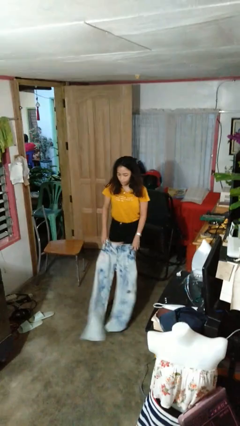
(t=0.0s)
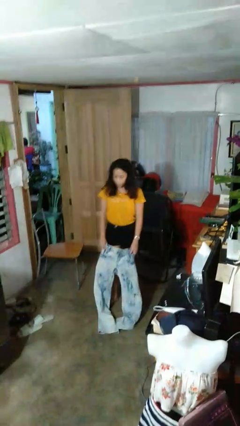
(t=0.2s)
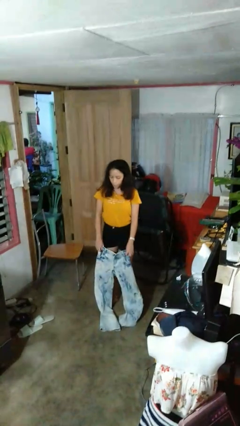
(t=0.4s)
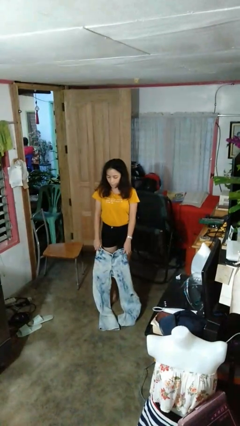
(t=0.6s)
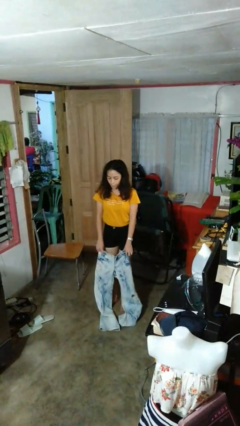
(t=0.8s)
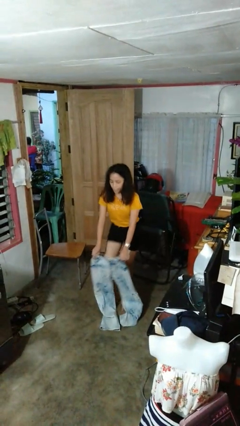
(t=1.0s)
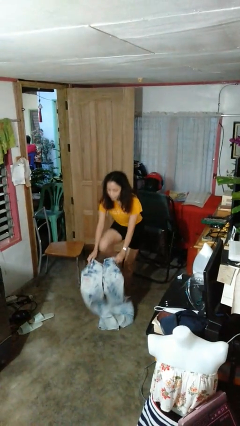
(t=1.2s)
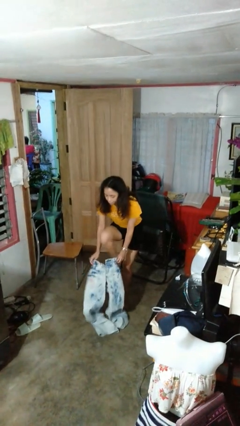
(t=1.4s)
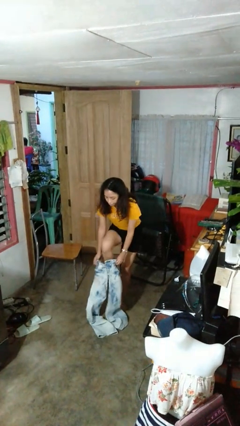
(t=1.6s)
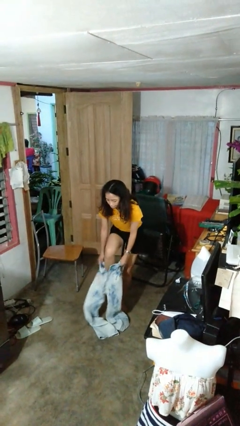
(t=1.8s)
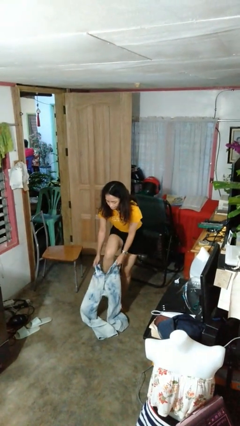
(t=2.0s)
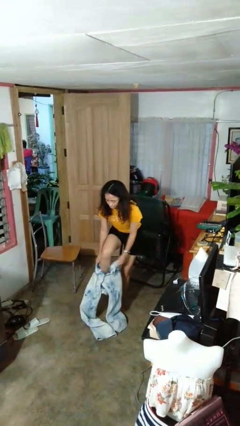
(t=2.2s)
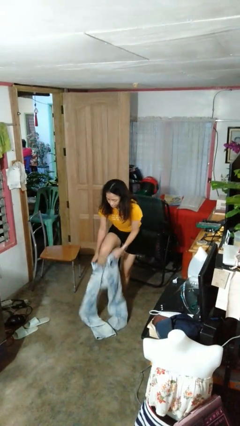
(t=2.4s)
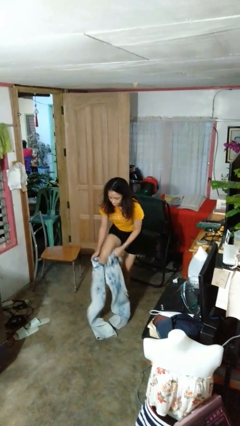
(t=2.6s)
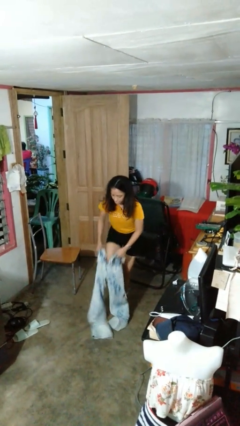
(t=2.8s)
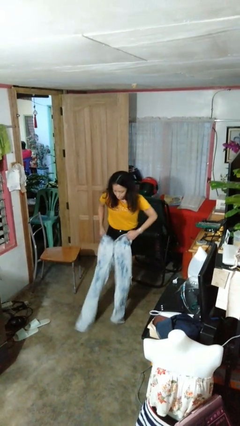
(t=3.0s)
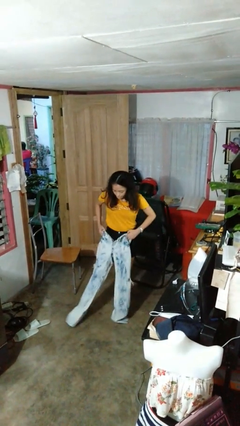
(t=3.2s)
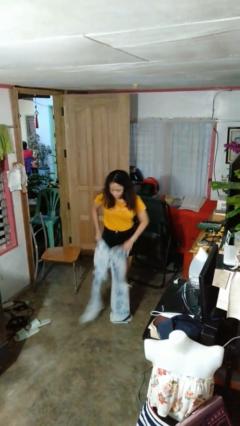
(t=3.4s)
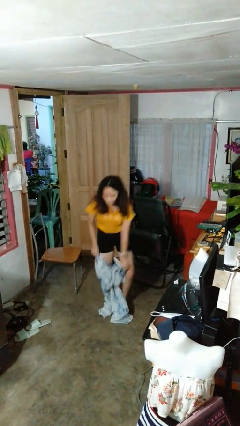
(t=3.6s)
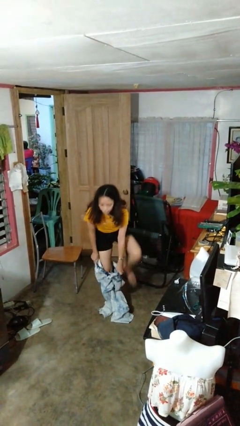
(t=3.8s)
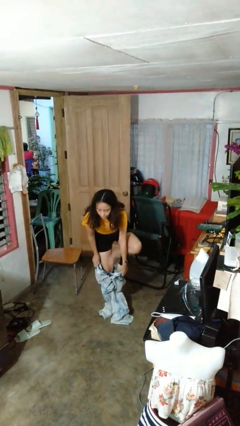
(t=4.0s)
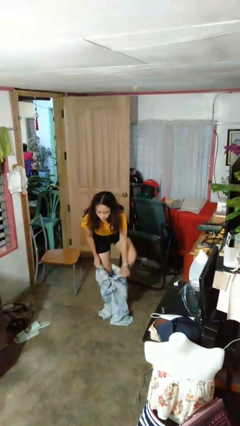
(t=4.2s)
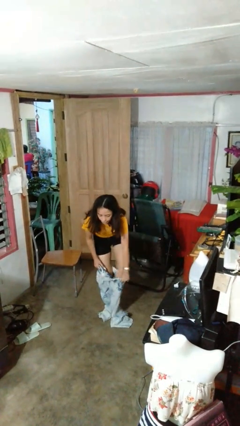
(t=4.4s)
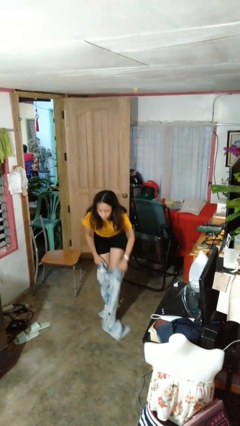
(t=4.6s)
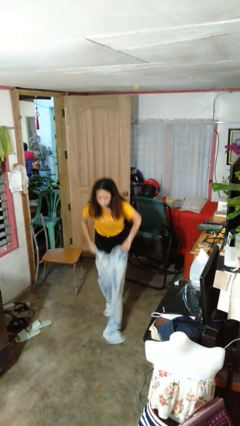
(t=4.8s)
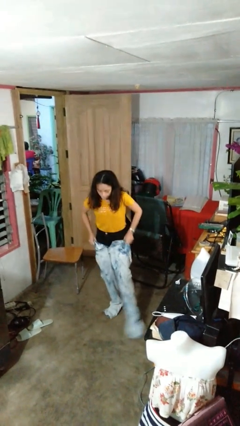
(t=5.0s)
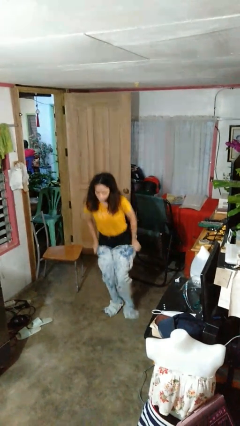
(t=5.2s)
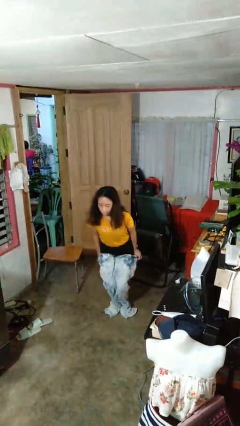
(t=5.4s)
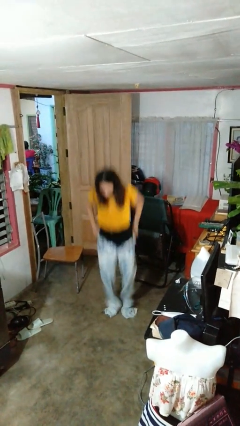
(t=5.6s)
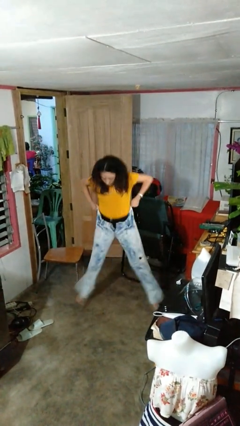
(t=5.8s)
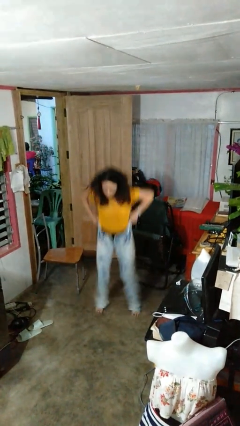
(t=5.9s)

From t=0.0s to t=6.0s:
person puts on pants

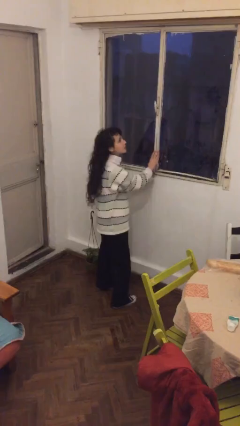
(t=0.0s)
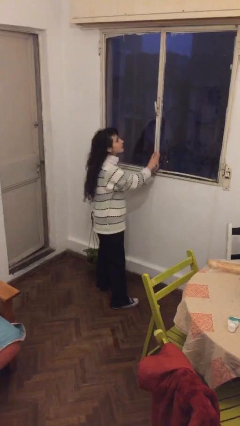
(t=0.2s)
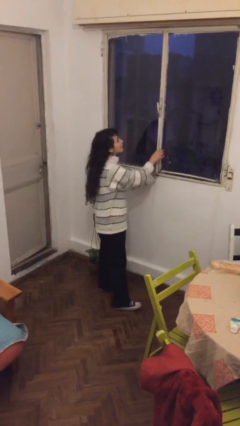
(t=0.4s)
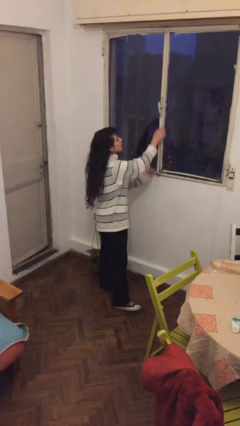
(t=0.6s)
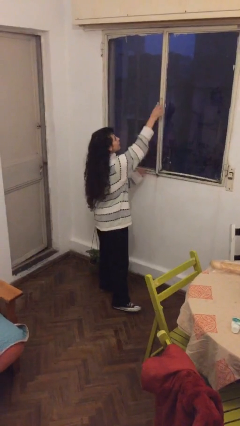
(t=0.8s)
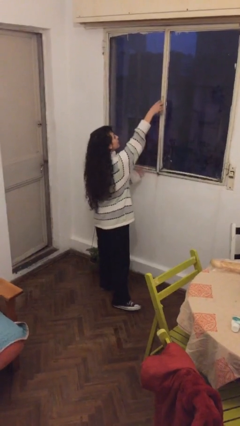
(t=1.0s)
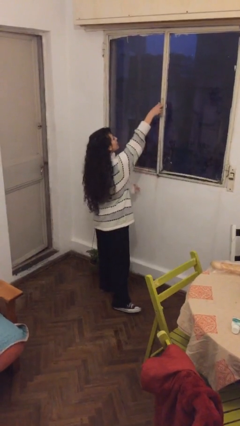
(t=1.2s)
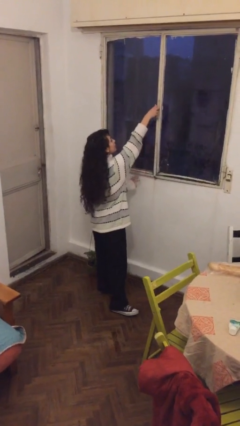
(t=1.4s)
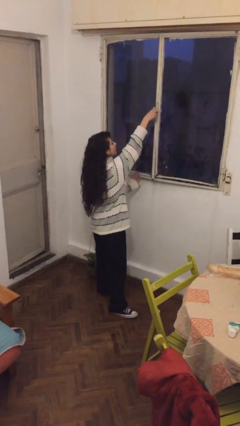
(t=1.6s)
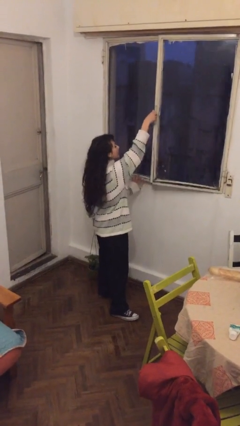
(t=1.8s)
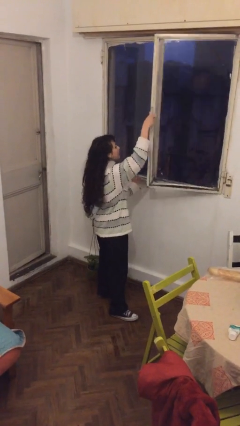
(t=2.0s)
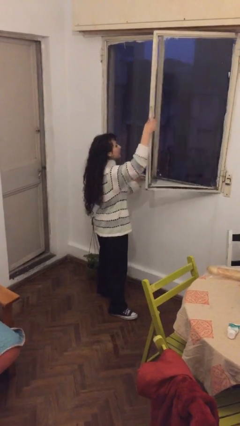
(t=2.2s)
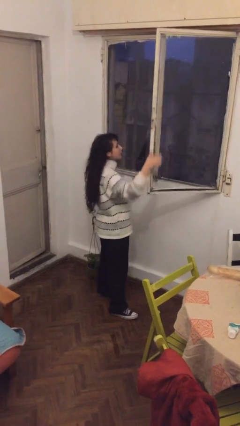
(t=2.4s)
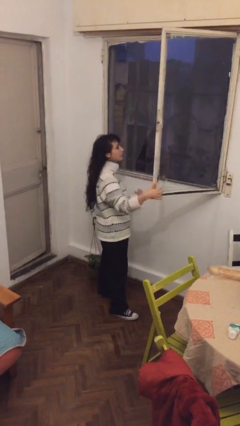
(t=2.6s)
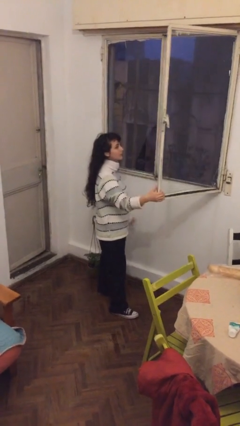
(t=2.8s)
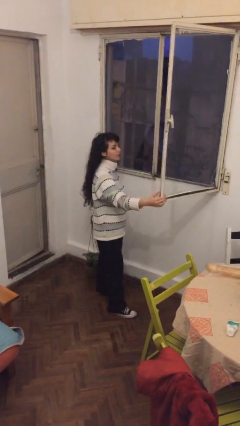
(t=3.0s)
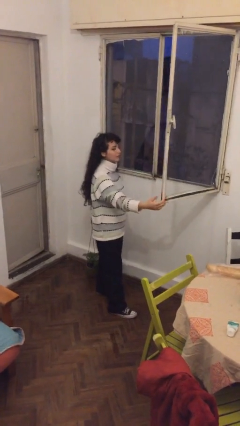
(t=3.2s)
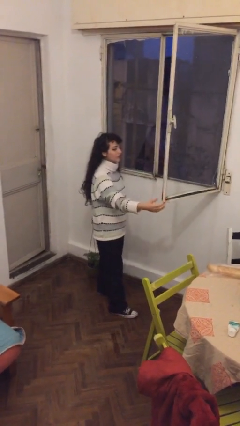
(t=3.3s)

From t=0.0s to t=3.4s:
person opens home window

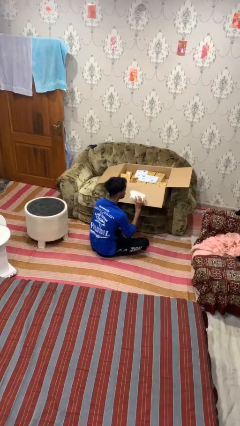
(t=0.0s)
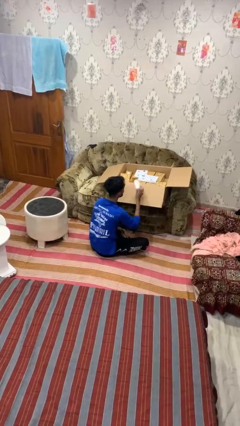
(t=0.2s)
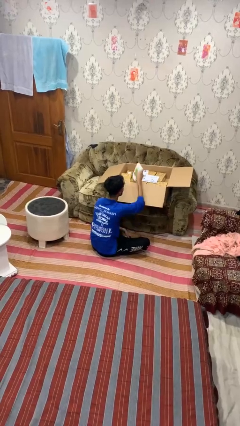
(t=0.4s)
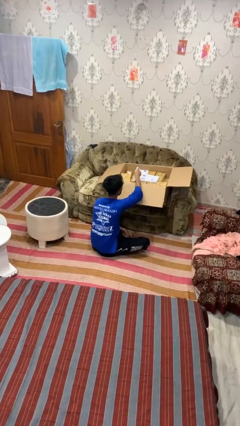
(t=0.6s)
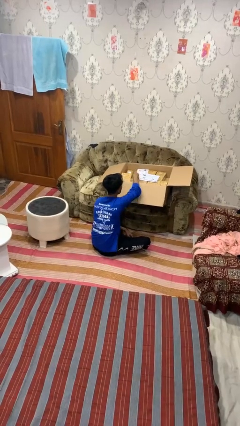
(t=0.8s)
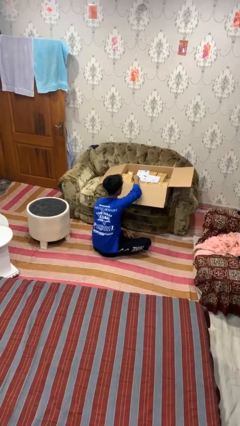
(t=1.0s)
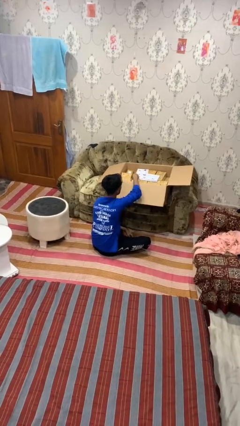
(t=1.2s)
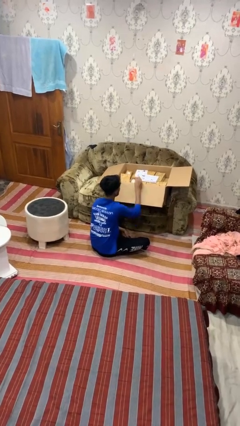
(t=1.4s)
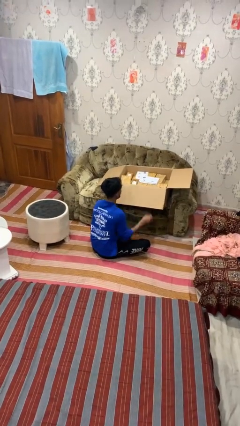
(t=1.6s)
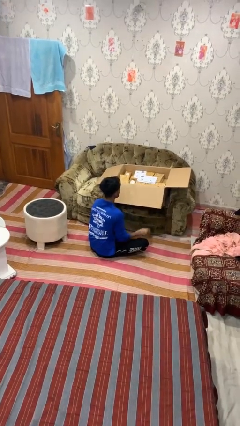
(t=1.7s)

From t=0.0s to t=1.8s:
person puts object into box

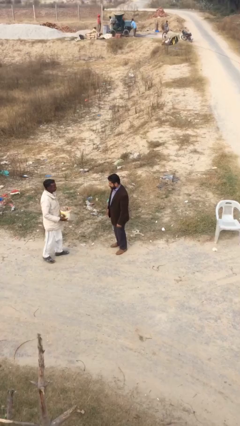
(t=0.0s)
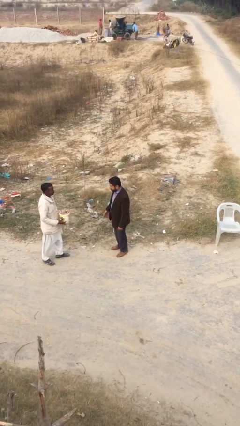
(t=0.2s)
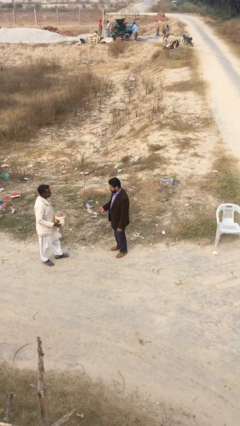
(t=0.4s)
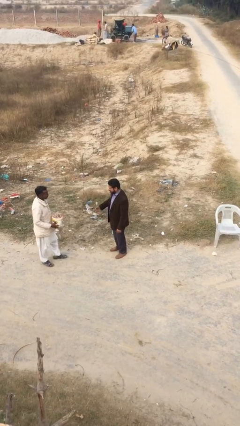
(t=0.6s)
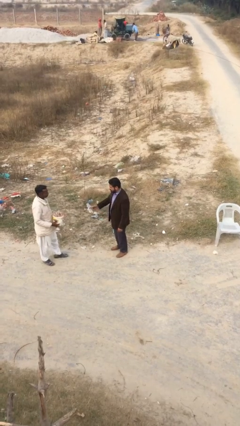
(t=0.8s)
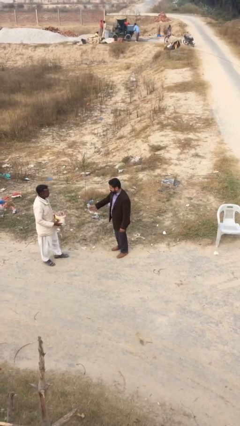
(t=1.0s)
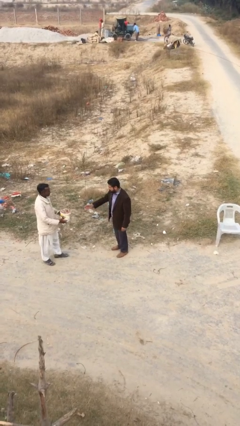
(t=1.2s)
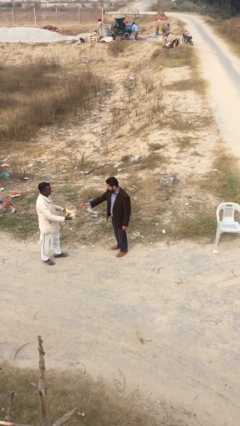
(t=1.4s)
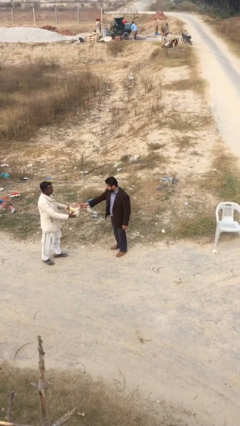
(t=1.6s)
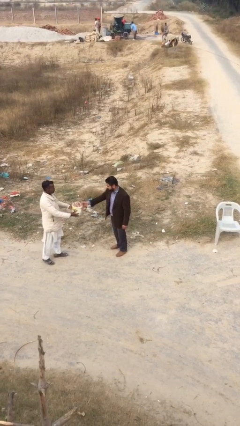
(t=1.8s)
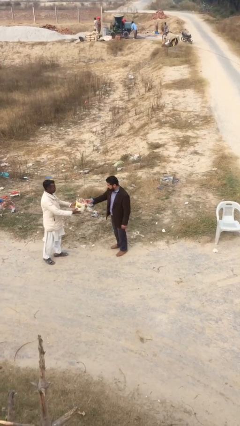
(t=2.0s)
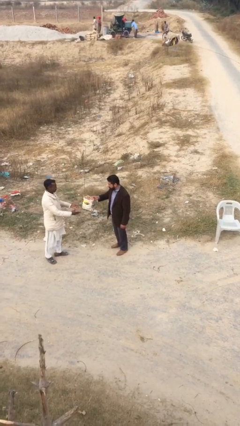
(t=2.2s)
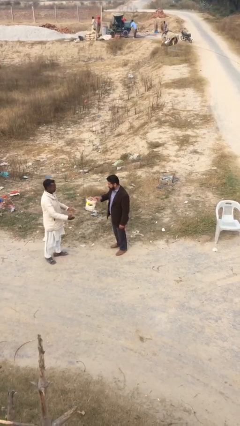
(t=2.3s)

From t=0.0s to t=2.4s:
person transfers object to person

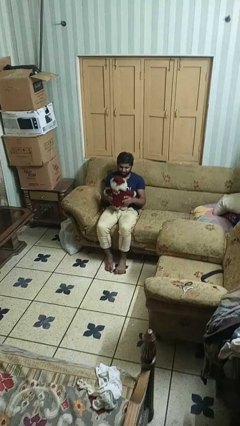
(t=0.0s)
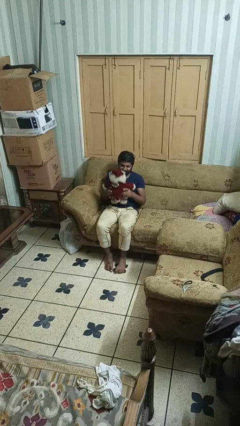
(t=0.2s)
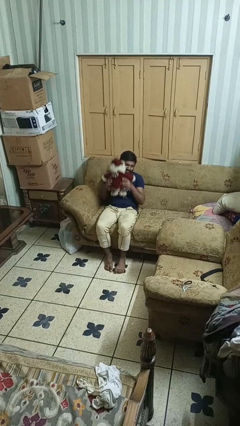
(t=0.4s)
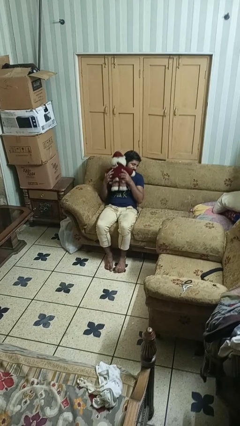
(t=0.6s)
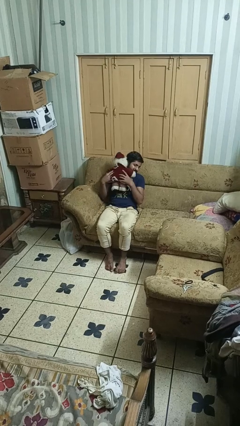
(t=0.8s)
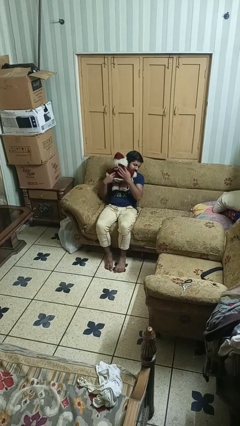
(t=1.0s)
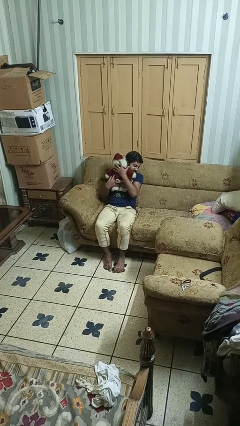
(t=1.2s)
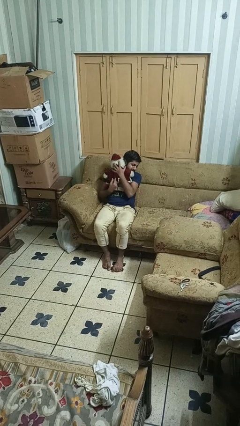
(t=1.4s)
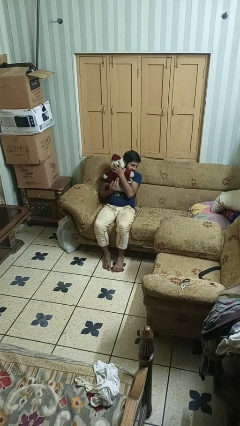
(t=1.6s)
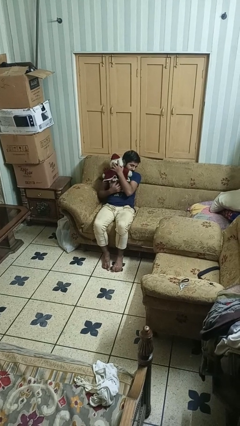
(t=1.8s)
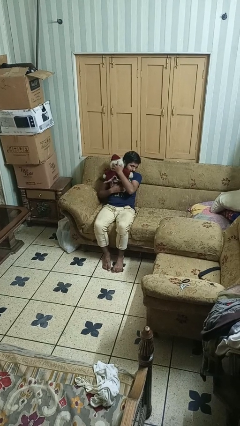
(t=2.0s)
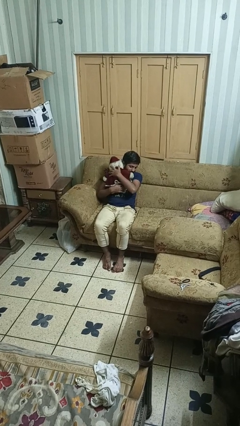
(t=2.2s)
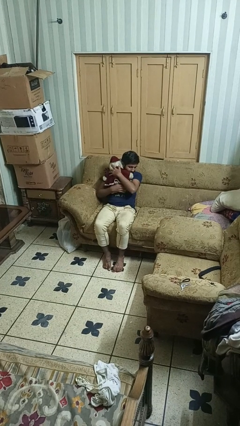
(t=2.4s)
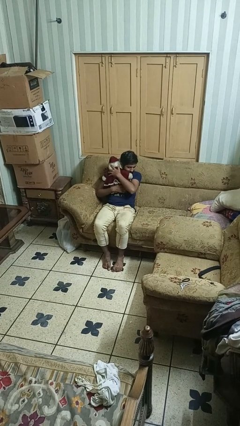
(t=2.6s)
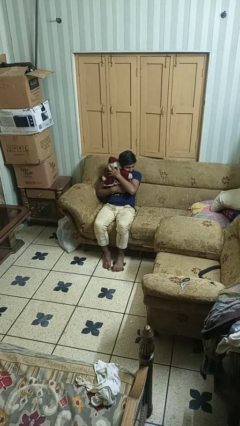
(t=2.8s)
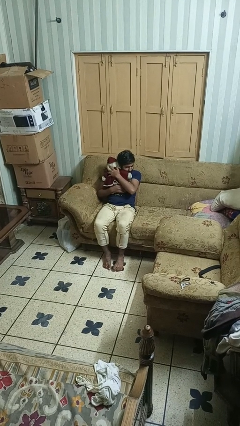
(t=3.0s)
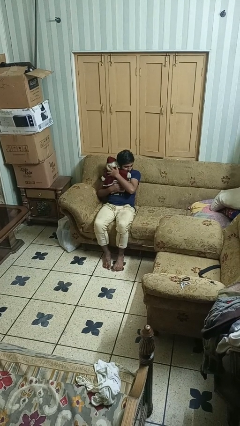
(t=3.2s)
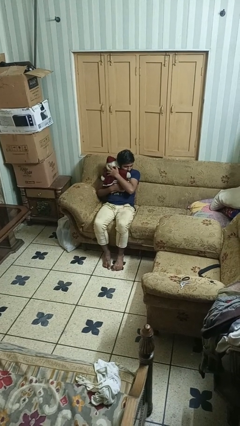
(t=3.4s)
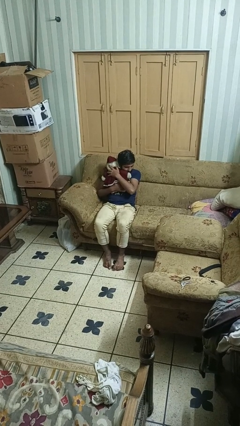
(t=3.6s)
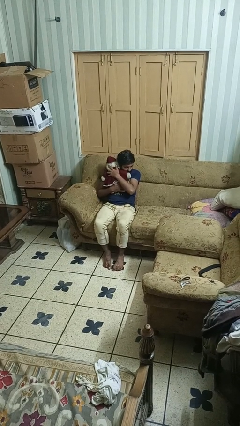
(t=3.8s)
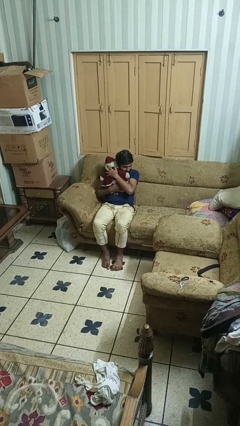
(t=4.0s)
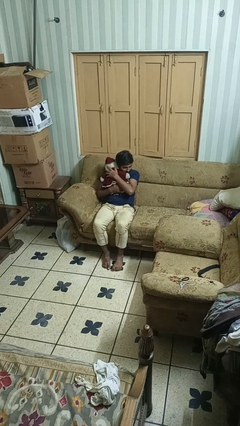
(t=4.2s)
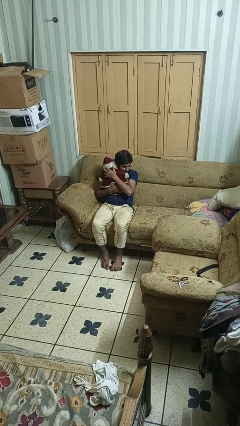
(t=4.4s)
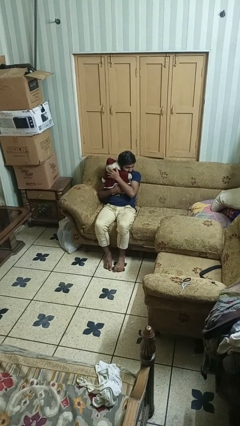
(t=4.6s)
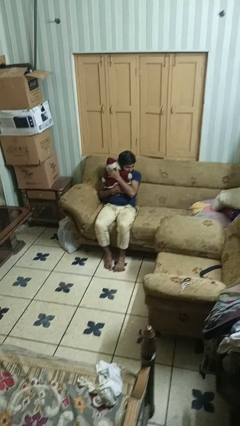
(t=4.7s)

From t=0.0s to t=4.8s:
person hugs stuffed animal
